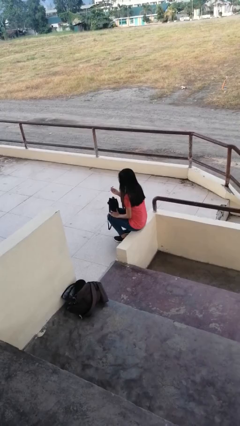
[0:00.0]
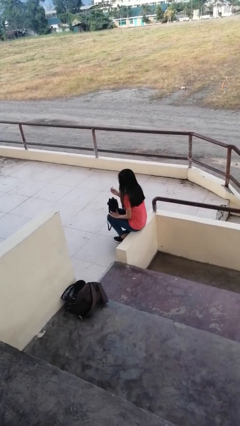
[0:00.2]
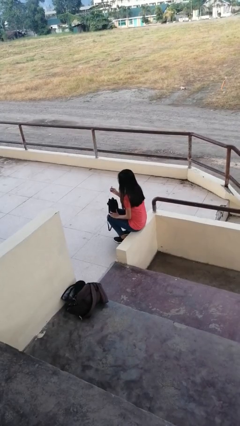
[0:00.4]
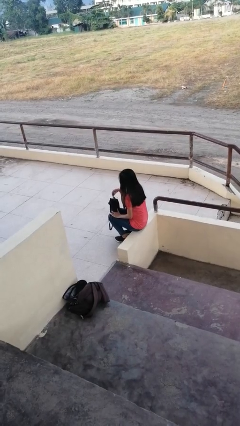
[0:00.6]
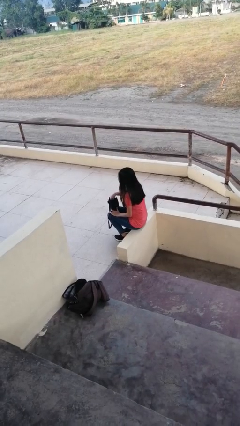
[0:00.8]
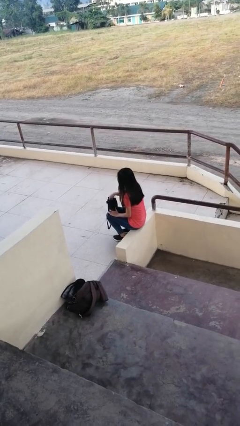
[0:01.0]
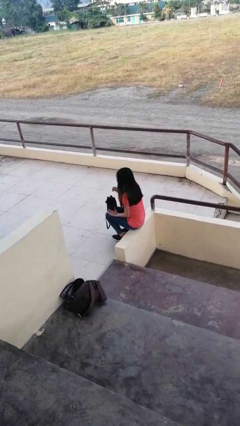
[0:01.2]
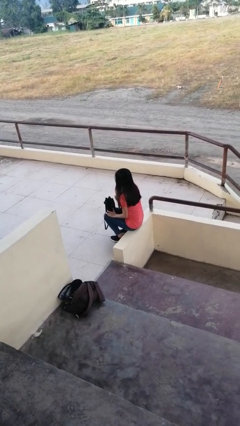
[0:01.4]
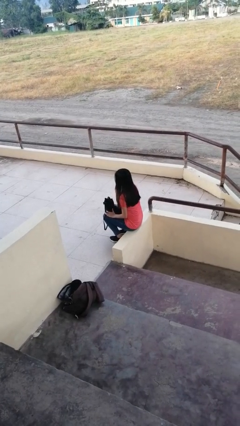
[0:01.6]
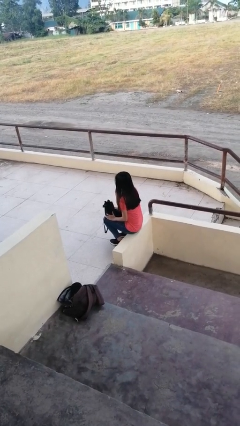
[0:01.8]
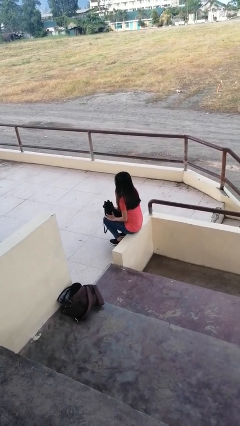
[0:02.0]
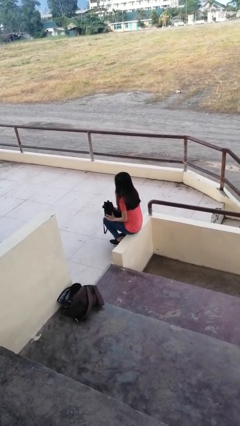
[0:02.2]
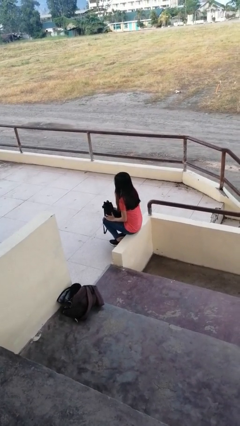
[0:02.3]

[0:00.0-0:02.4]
person puts object into purse

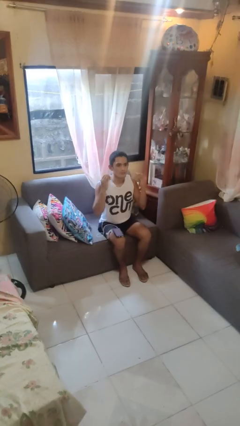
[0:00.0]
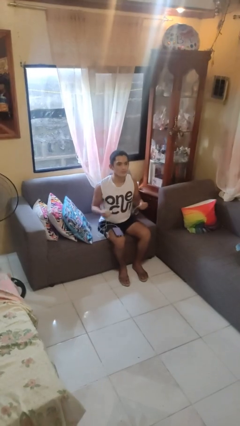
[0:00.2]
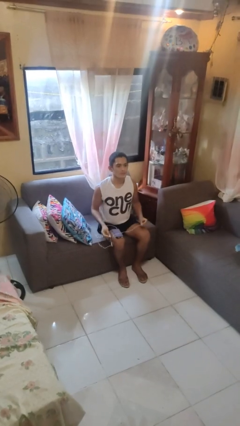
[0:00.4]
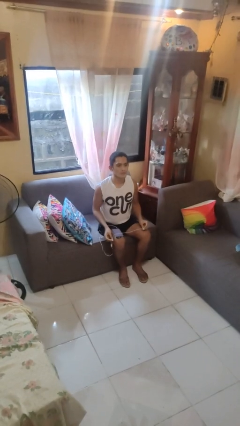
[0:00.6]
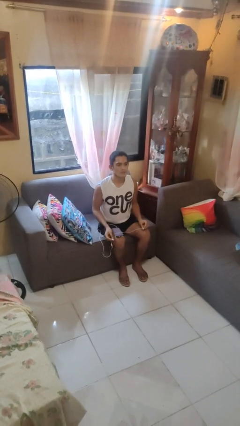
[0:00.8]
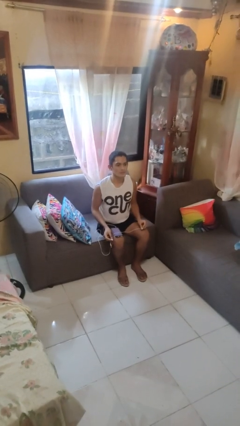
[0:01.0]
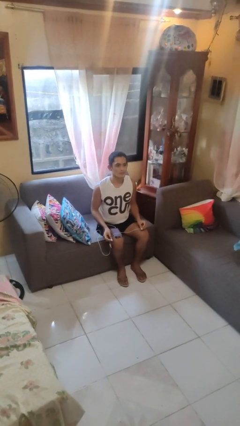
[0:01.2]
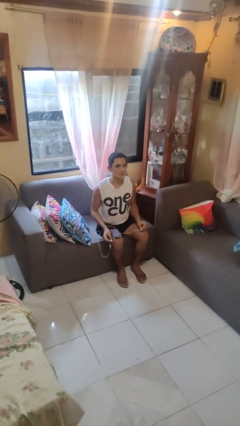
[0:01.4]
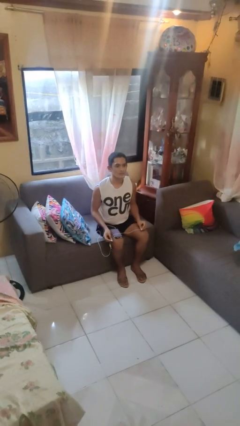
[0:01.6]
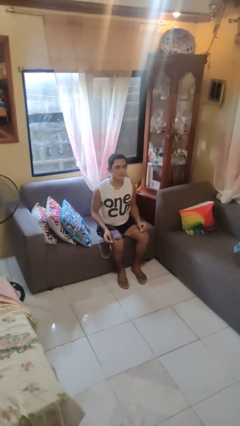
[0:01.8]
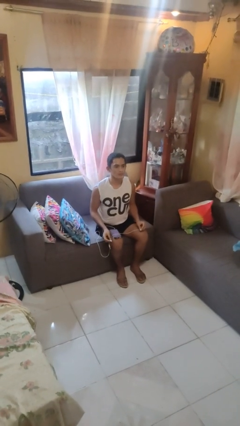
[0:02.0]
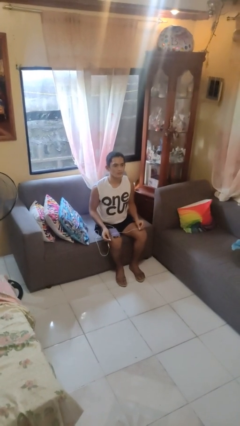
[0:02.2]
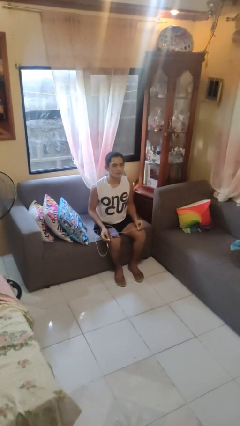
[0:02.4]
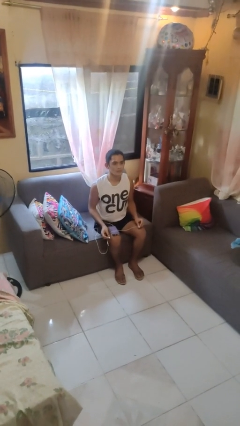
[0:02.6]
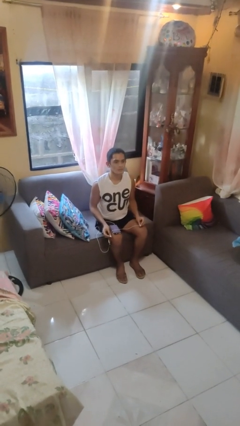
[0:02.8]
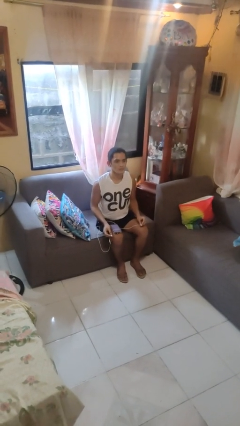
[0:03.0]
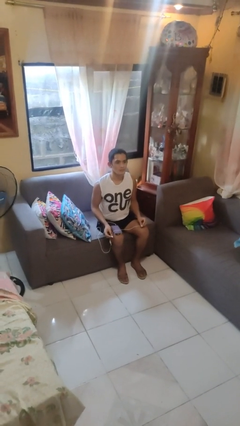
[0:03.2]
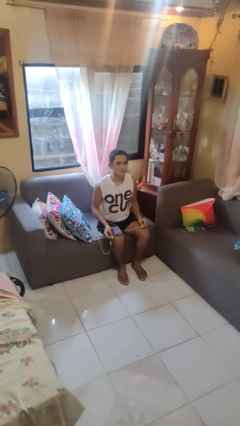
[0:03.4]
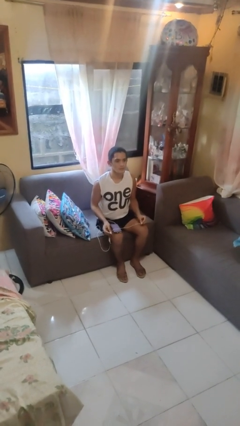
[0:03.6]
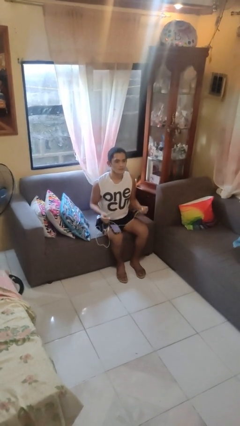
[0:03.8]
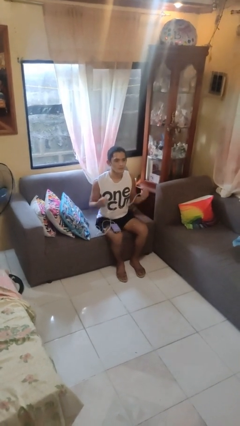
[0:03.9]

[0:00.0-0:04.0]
person takes off headphones

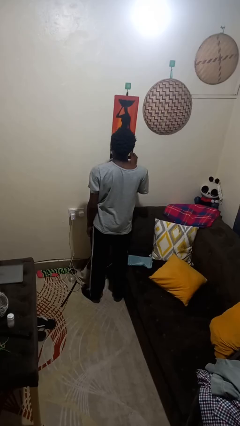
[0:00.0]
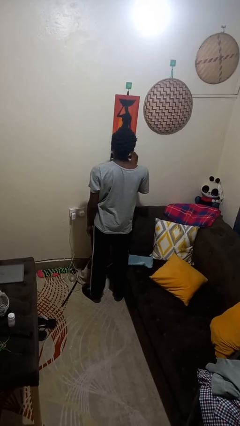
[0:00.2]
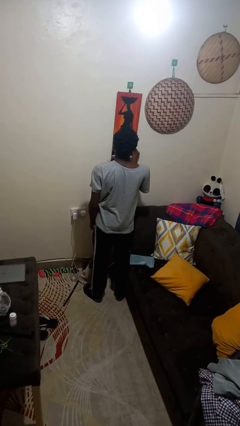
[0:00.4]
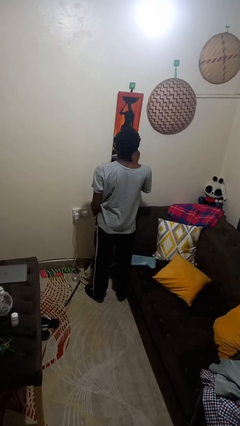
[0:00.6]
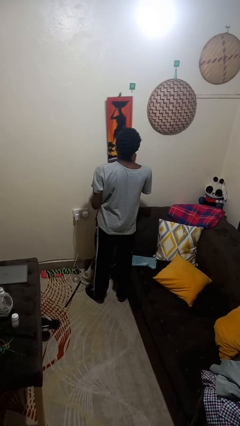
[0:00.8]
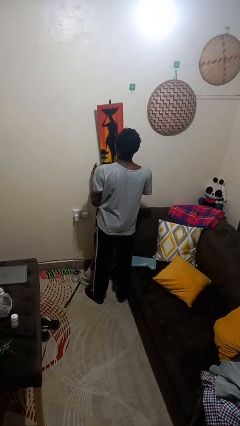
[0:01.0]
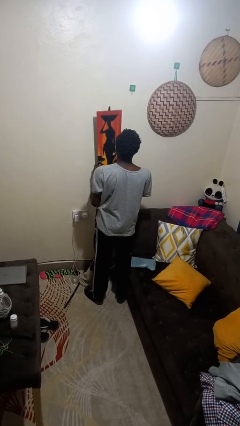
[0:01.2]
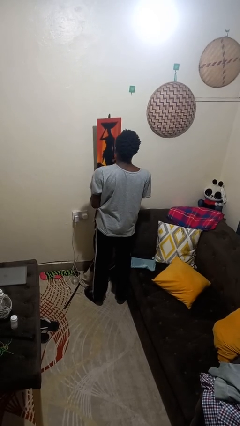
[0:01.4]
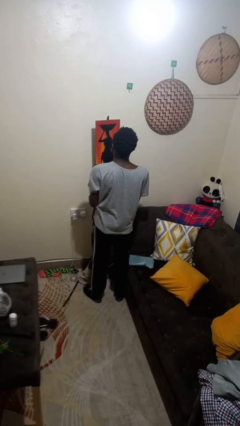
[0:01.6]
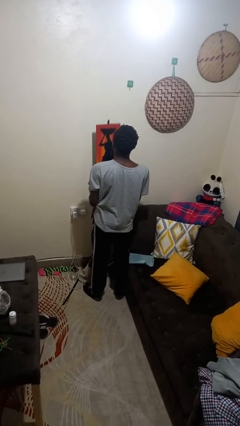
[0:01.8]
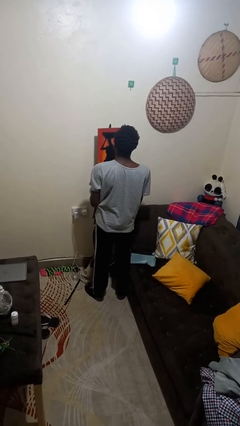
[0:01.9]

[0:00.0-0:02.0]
person takes down picture frame

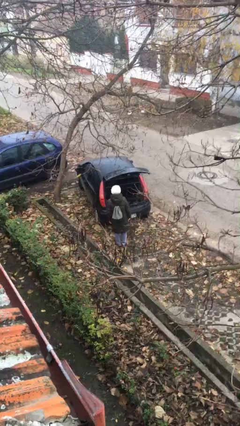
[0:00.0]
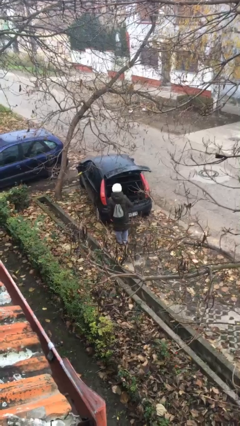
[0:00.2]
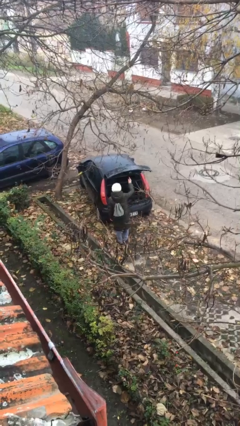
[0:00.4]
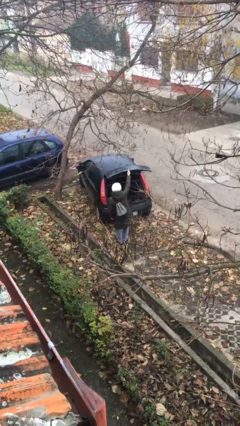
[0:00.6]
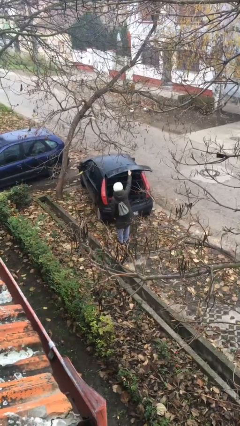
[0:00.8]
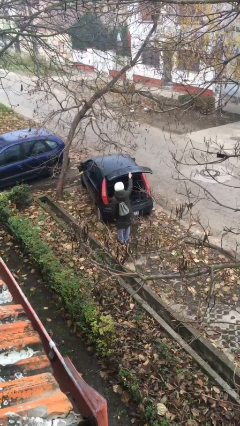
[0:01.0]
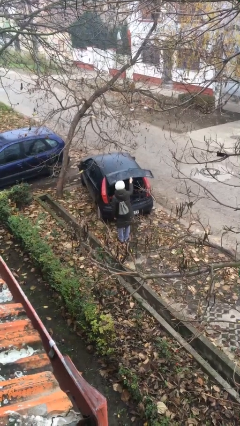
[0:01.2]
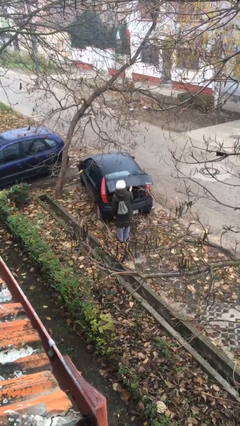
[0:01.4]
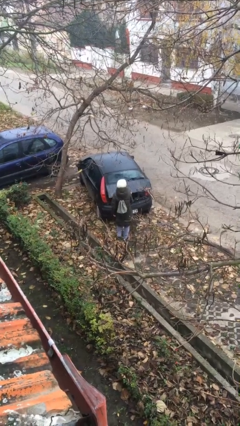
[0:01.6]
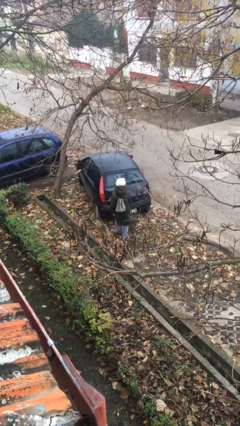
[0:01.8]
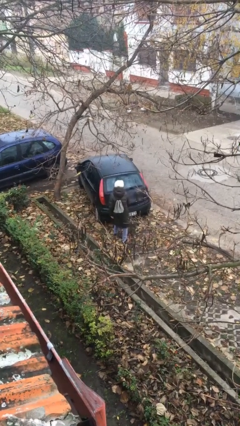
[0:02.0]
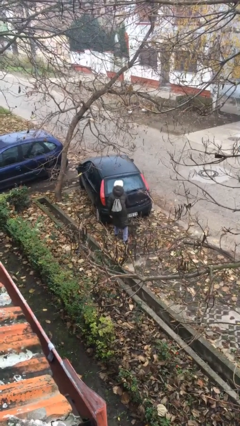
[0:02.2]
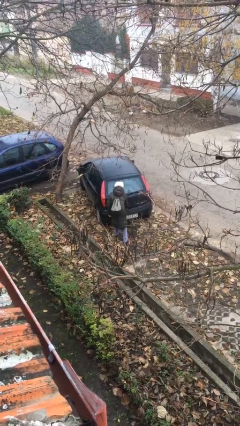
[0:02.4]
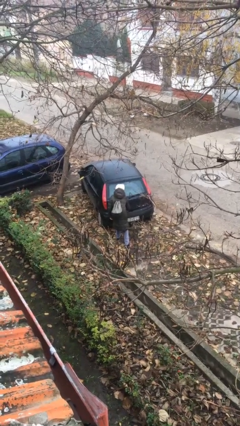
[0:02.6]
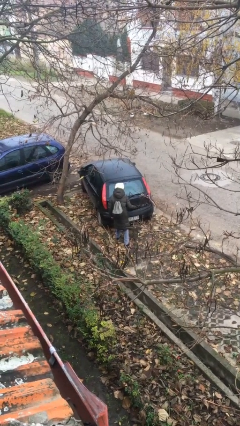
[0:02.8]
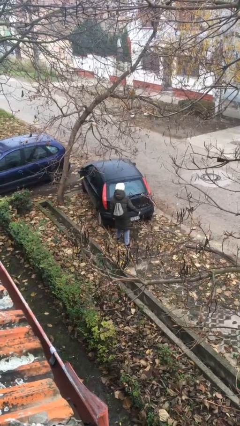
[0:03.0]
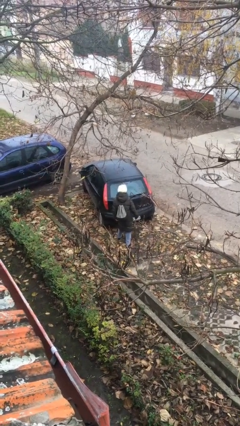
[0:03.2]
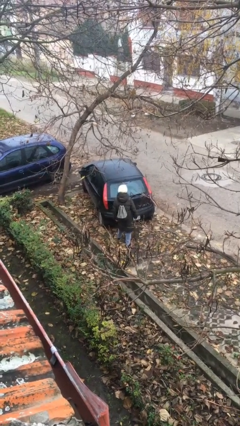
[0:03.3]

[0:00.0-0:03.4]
person closes car trunk

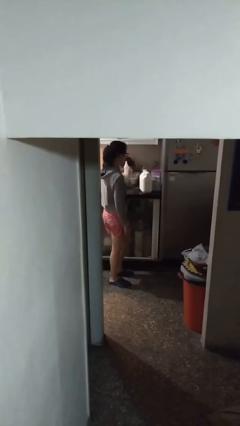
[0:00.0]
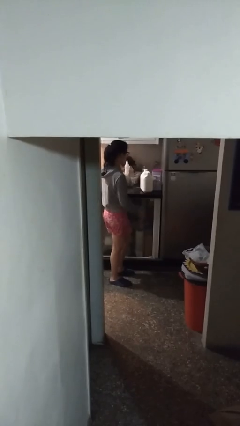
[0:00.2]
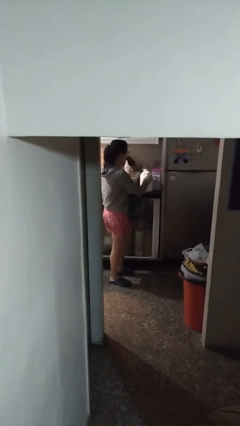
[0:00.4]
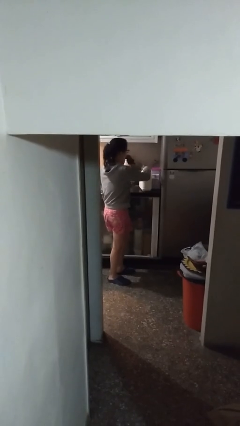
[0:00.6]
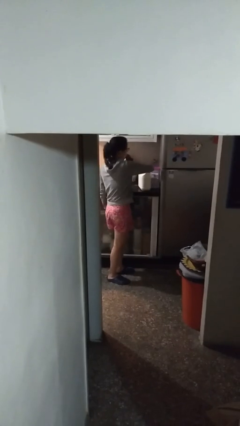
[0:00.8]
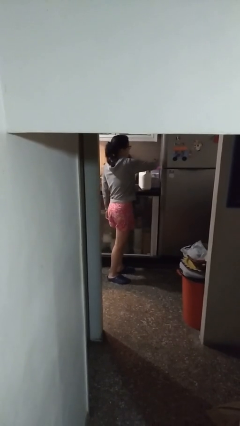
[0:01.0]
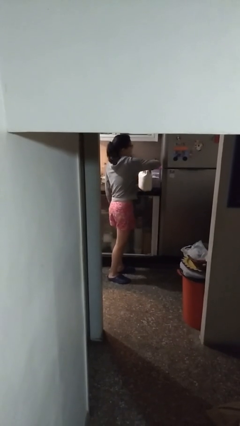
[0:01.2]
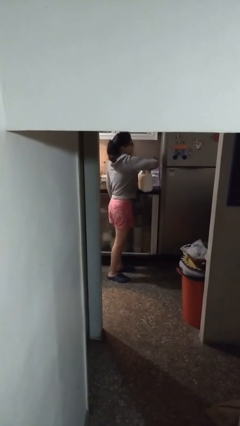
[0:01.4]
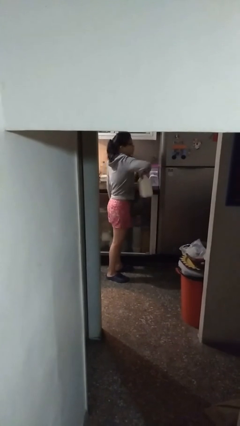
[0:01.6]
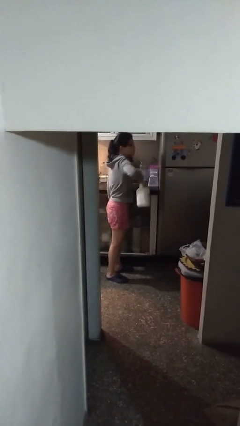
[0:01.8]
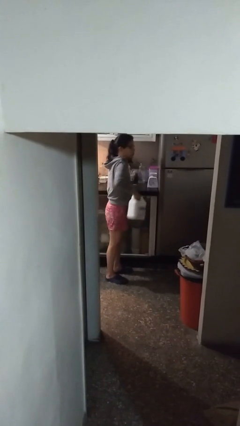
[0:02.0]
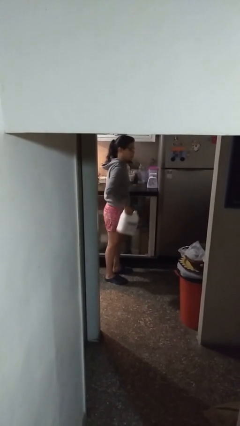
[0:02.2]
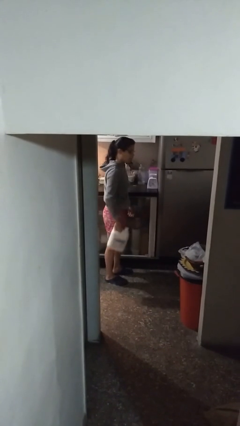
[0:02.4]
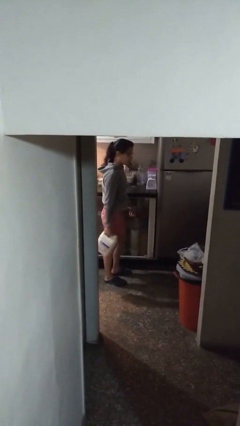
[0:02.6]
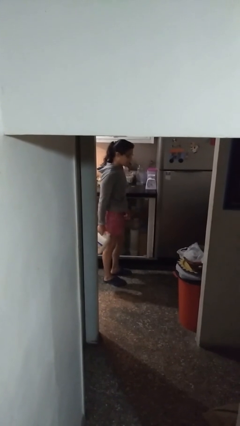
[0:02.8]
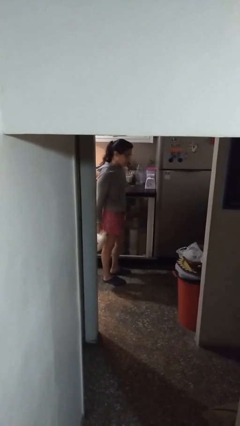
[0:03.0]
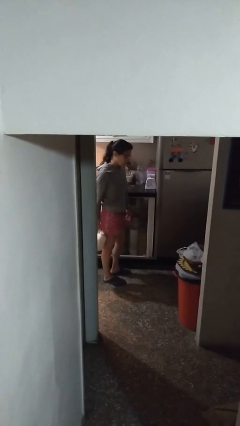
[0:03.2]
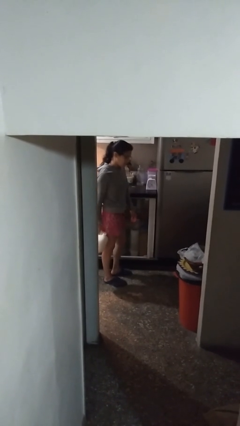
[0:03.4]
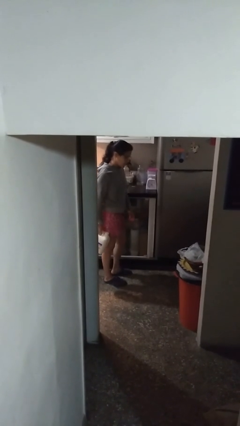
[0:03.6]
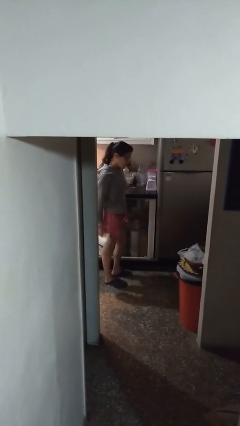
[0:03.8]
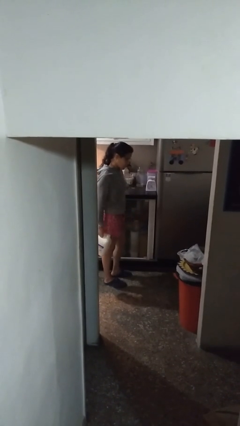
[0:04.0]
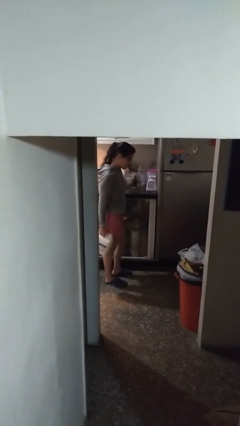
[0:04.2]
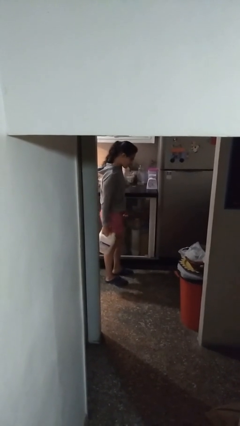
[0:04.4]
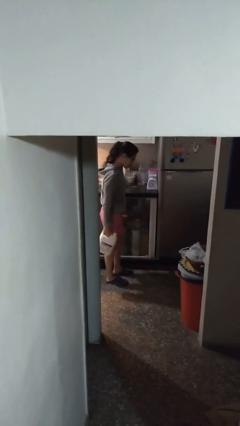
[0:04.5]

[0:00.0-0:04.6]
person picks up object from countertop

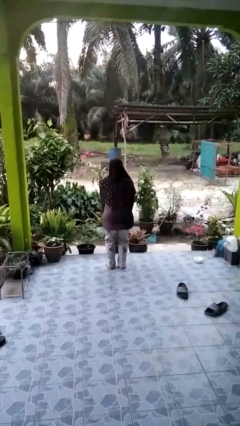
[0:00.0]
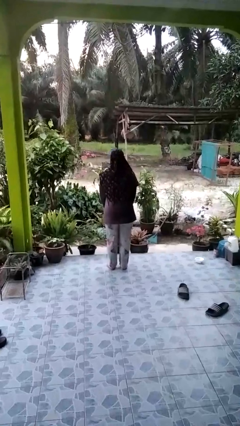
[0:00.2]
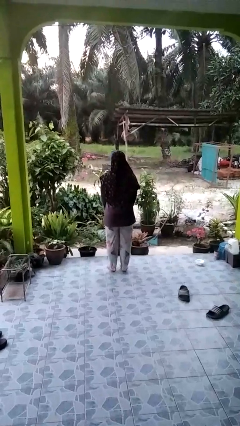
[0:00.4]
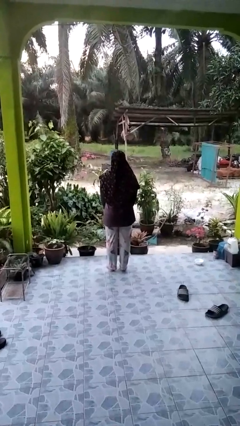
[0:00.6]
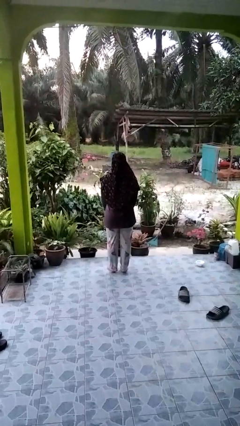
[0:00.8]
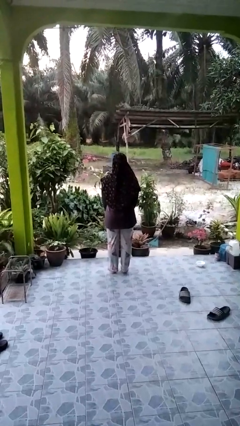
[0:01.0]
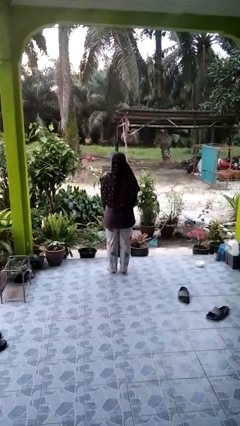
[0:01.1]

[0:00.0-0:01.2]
person stands up
